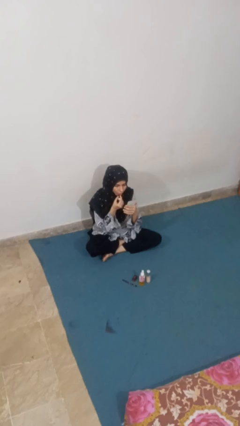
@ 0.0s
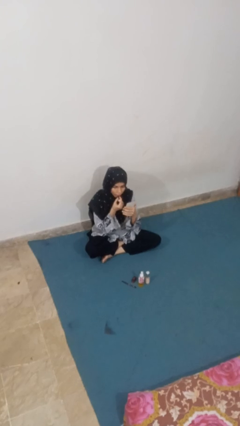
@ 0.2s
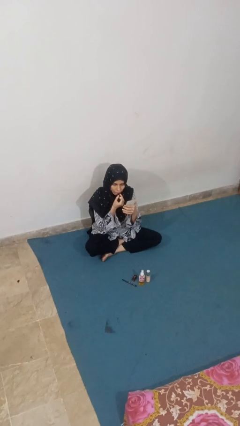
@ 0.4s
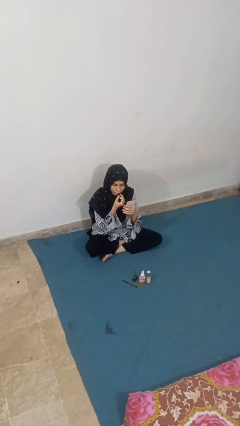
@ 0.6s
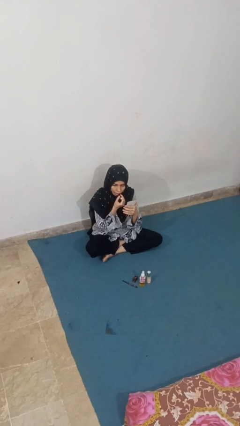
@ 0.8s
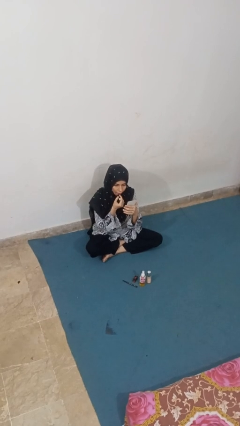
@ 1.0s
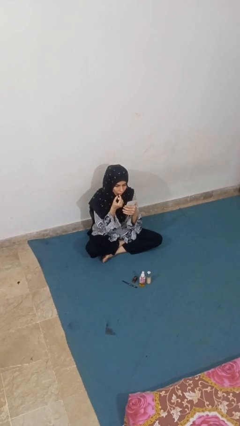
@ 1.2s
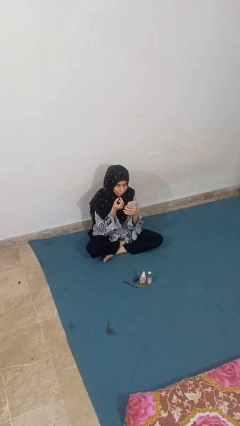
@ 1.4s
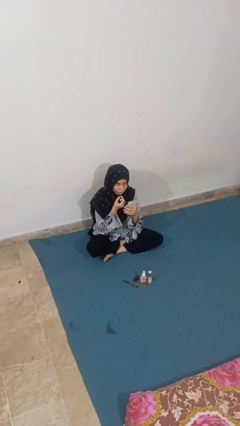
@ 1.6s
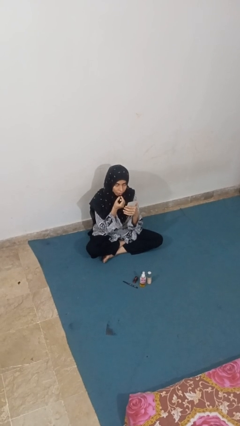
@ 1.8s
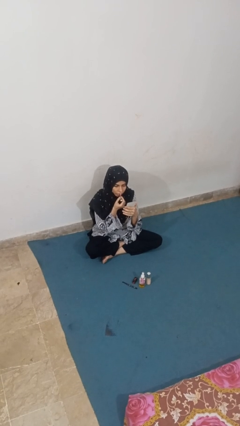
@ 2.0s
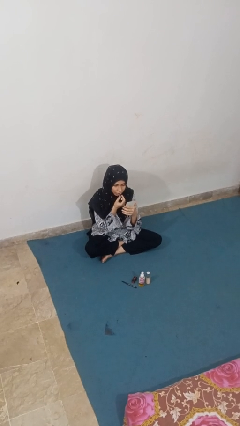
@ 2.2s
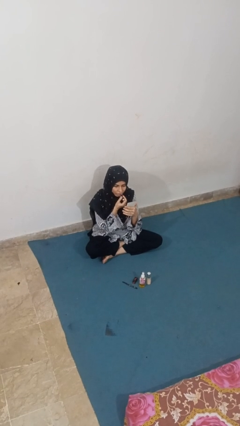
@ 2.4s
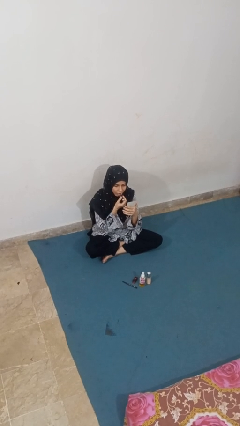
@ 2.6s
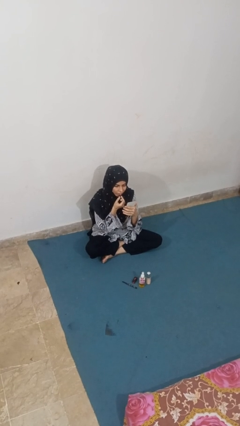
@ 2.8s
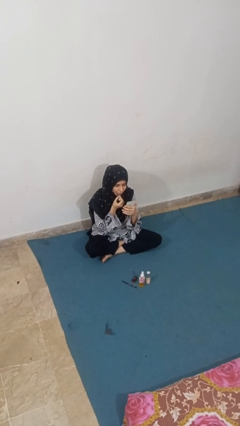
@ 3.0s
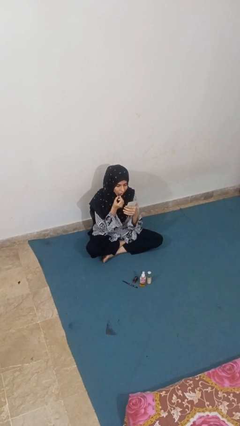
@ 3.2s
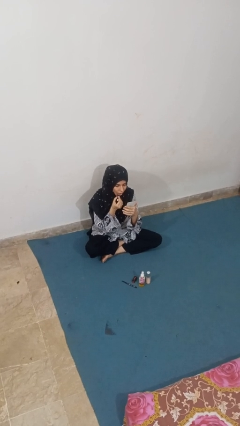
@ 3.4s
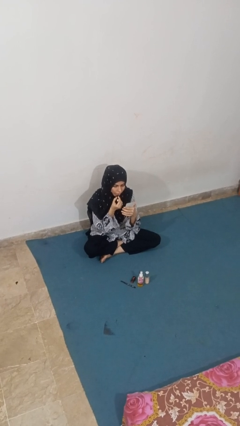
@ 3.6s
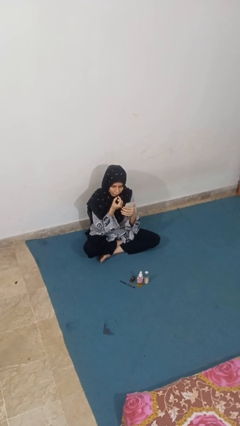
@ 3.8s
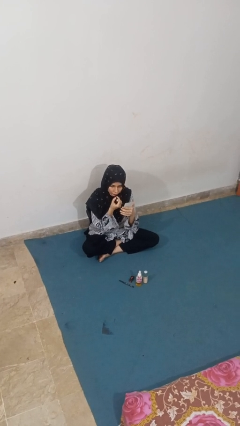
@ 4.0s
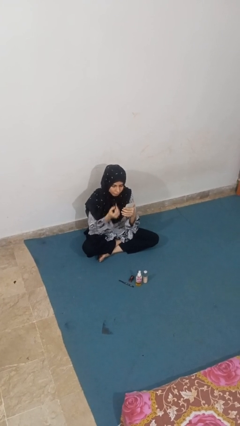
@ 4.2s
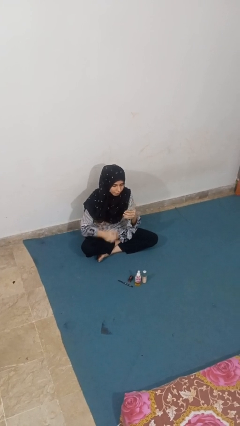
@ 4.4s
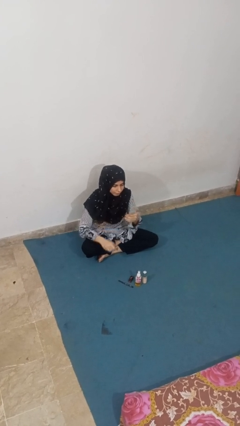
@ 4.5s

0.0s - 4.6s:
person applies lip makeup

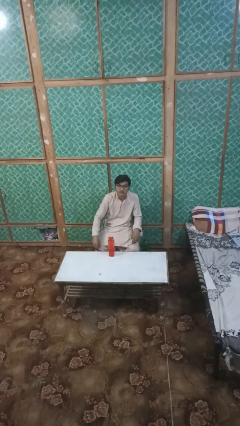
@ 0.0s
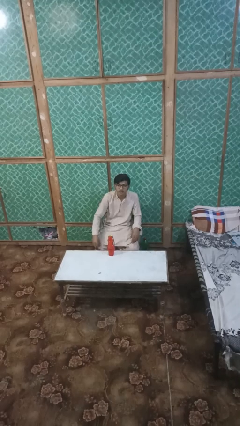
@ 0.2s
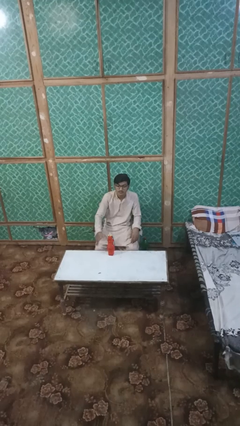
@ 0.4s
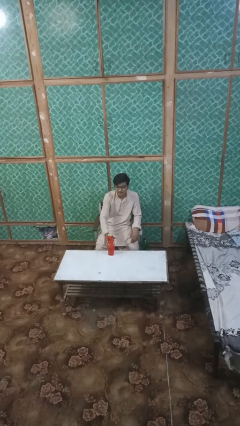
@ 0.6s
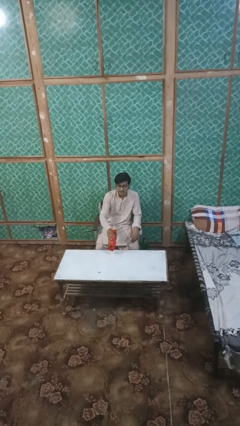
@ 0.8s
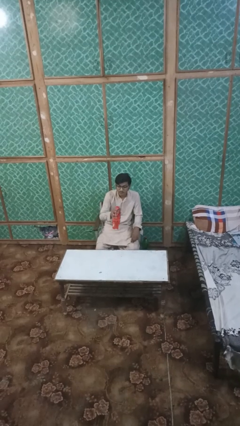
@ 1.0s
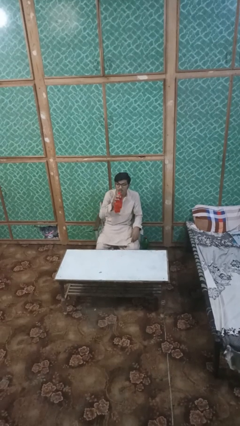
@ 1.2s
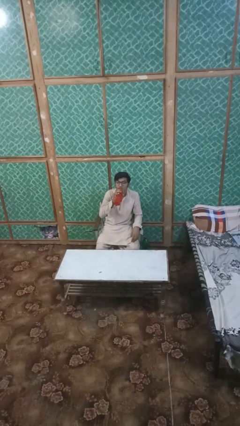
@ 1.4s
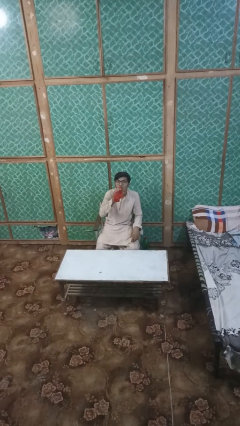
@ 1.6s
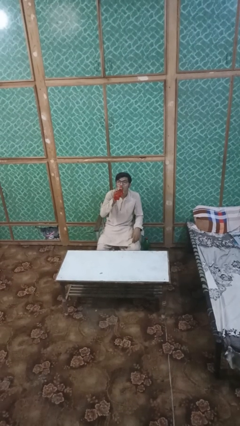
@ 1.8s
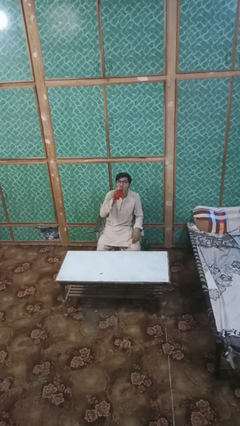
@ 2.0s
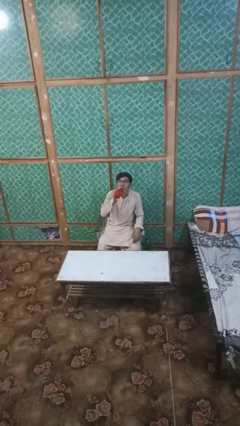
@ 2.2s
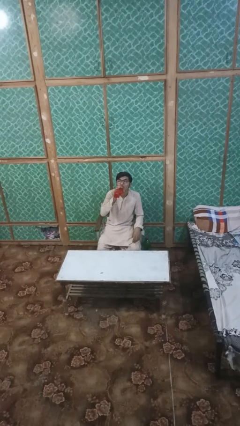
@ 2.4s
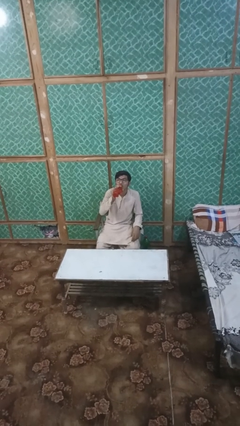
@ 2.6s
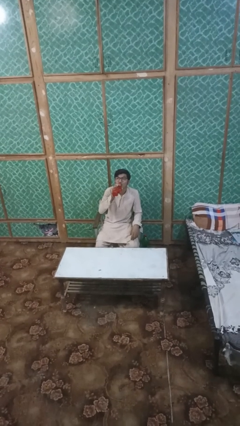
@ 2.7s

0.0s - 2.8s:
person drinks from bottle

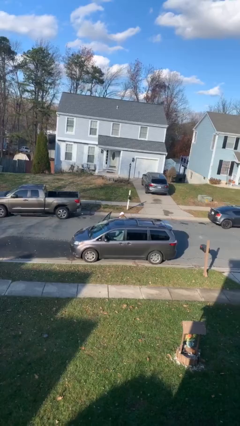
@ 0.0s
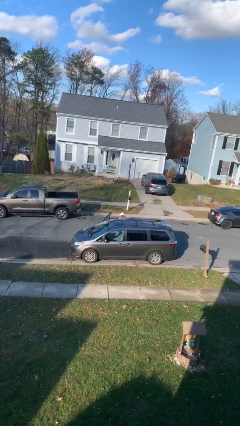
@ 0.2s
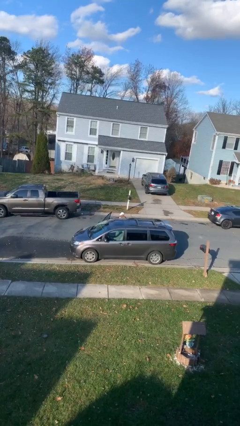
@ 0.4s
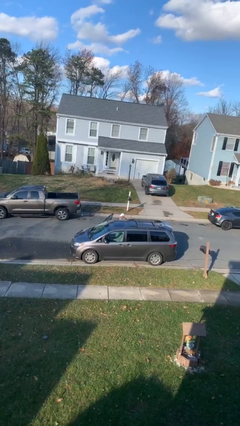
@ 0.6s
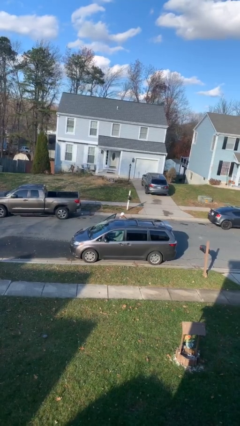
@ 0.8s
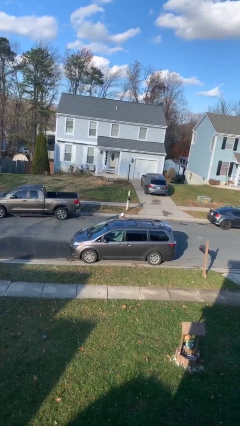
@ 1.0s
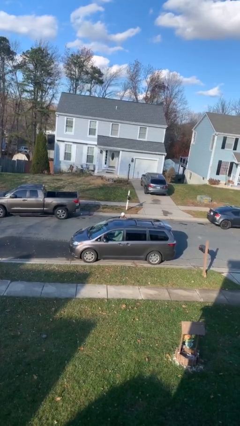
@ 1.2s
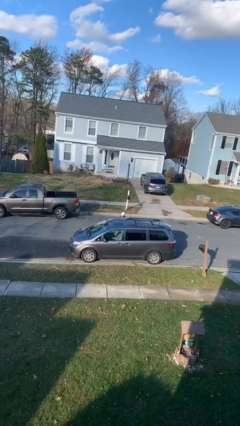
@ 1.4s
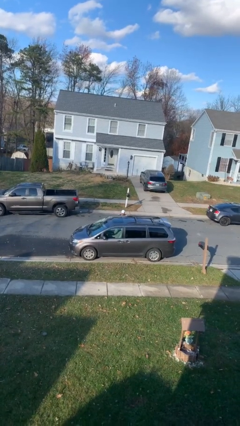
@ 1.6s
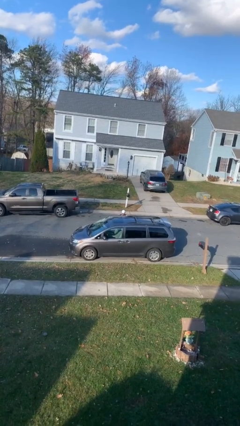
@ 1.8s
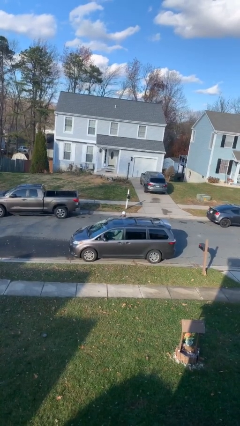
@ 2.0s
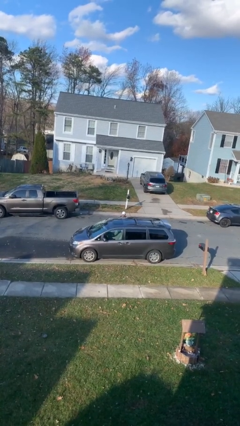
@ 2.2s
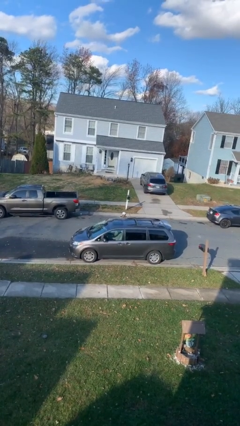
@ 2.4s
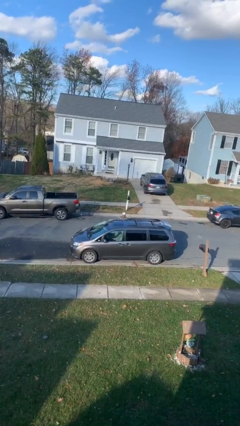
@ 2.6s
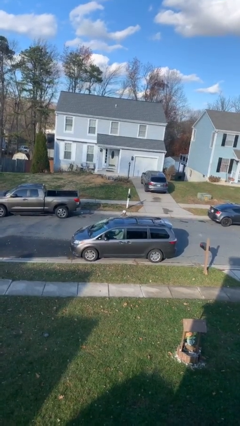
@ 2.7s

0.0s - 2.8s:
person closes car door

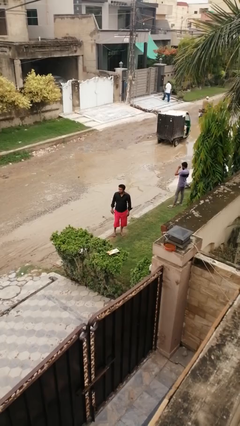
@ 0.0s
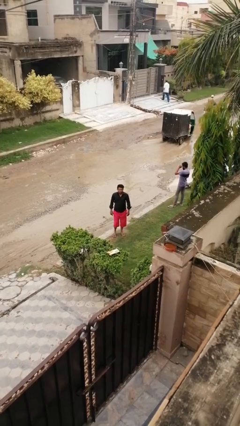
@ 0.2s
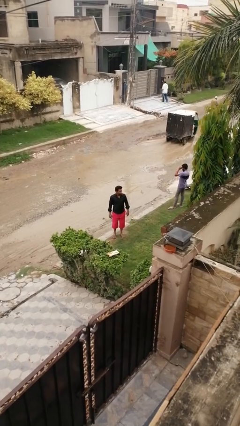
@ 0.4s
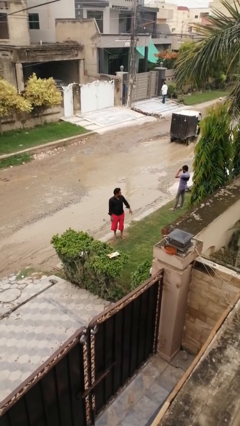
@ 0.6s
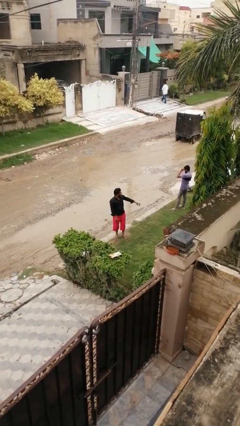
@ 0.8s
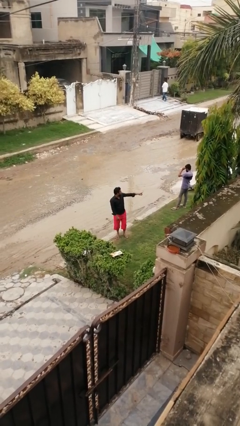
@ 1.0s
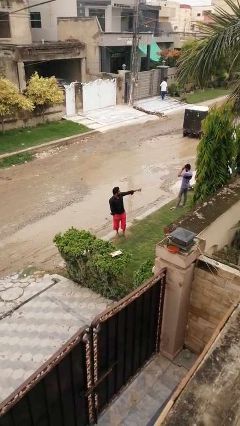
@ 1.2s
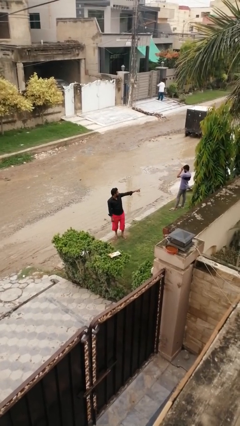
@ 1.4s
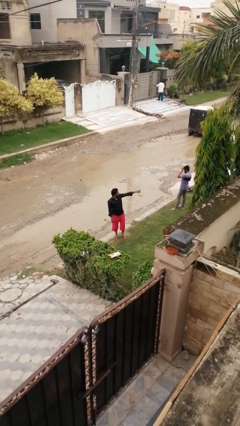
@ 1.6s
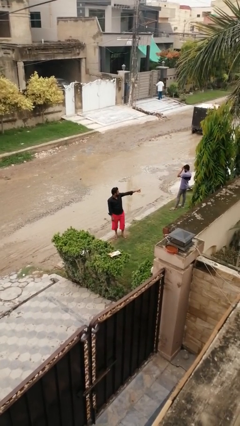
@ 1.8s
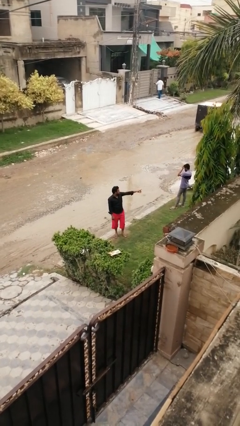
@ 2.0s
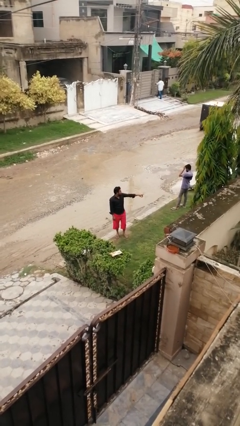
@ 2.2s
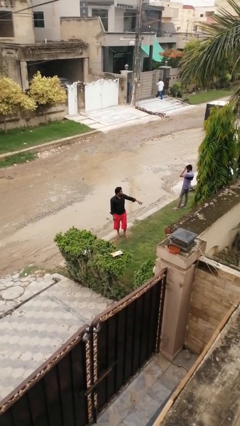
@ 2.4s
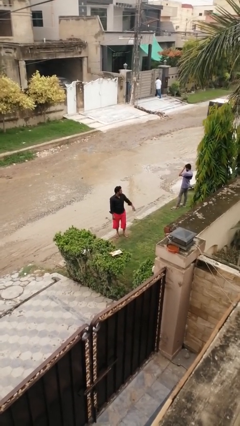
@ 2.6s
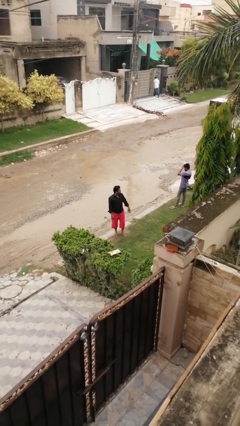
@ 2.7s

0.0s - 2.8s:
person points at person

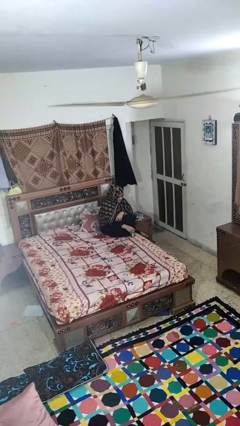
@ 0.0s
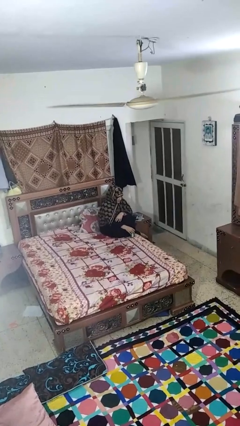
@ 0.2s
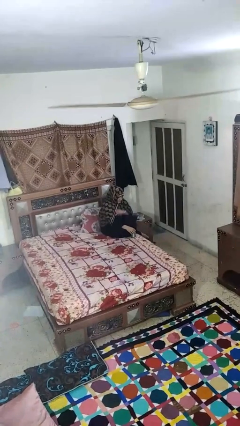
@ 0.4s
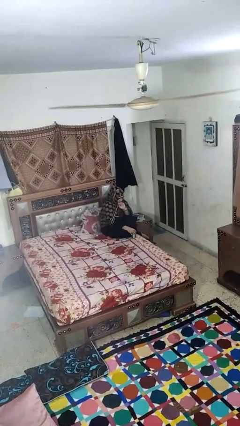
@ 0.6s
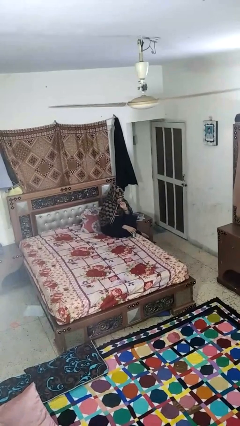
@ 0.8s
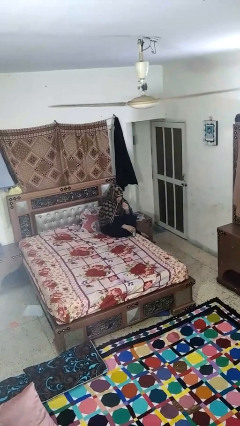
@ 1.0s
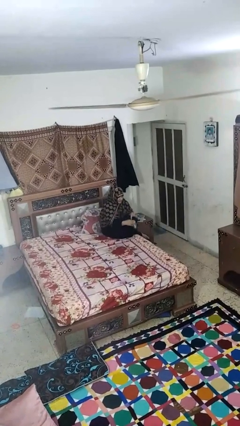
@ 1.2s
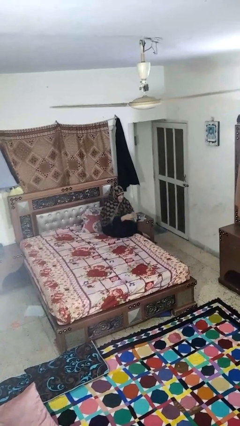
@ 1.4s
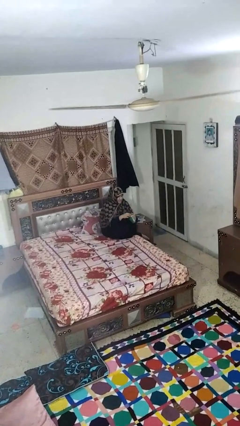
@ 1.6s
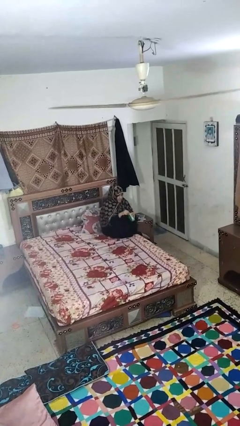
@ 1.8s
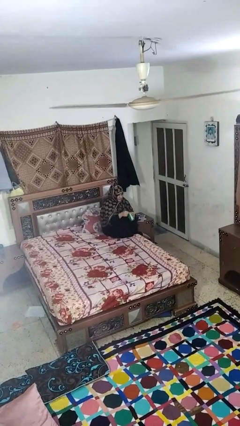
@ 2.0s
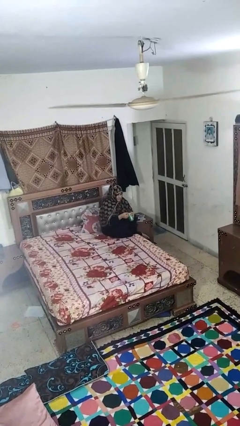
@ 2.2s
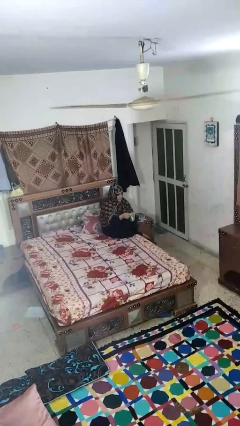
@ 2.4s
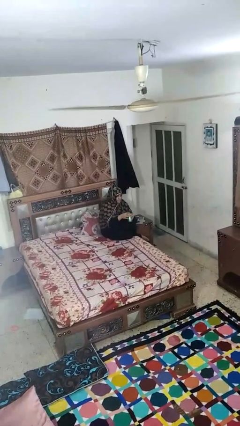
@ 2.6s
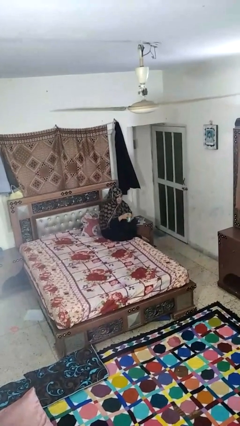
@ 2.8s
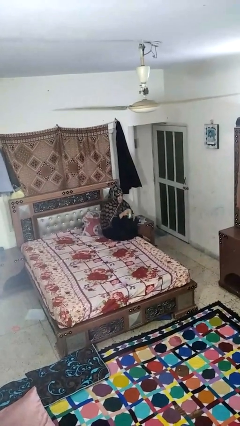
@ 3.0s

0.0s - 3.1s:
person opens beverage can

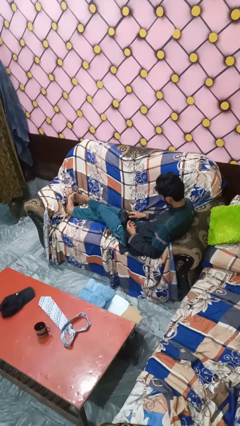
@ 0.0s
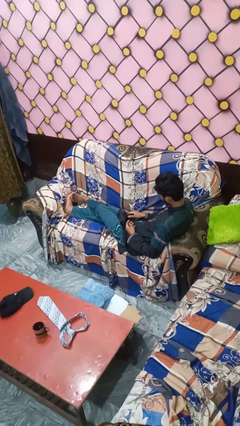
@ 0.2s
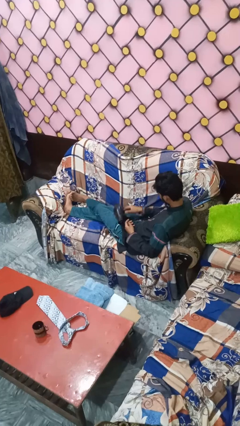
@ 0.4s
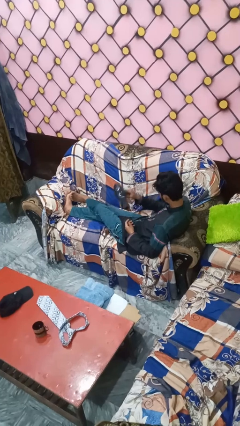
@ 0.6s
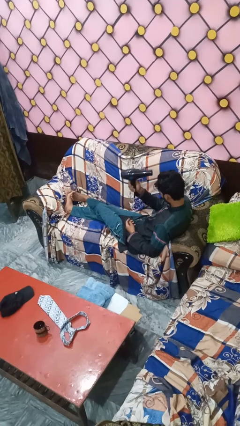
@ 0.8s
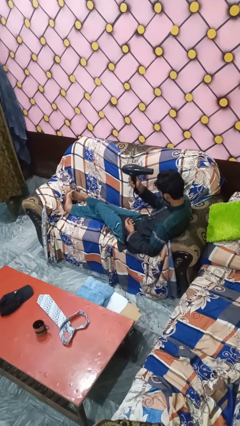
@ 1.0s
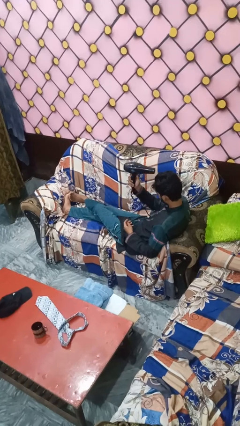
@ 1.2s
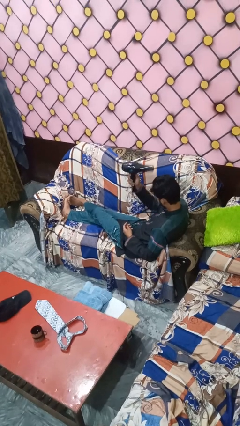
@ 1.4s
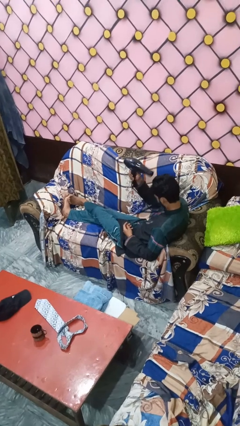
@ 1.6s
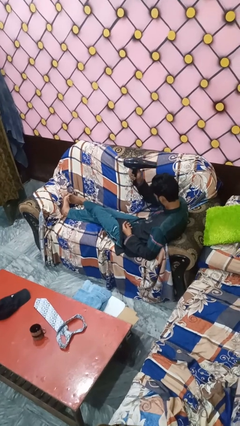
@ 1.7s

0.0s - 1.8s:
person dries hair with hairdryer
